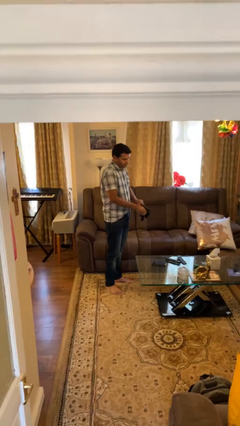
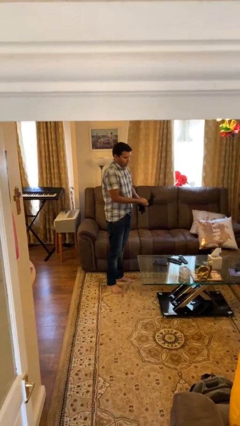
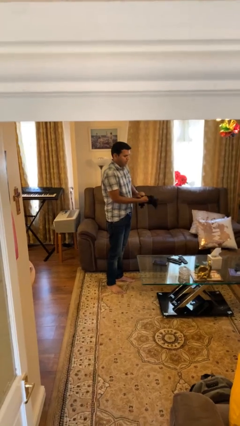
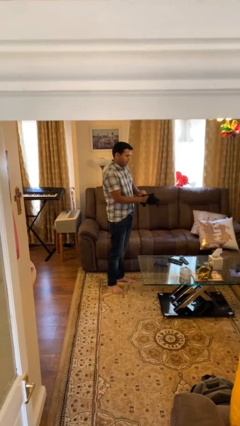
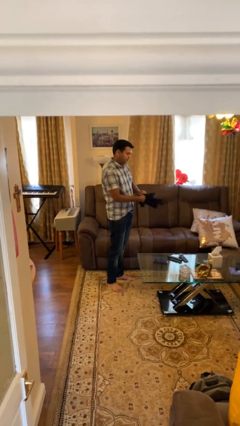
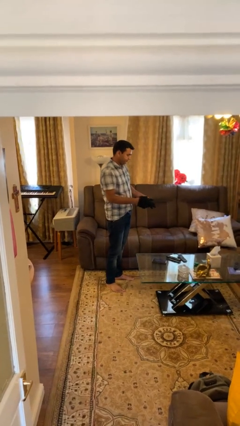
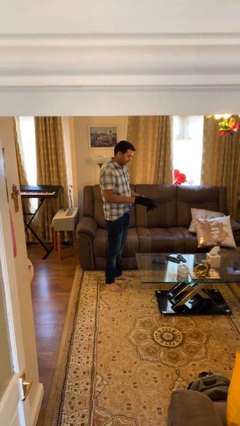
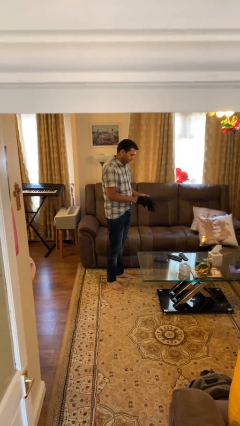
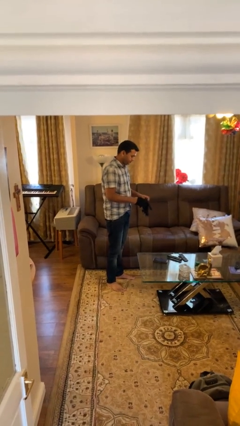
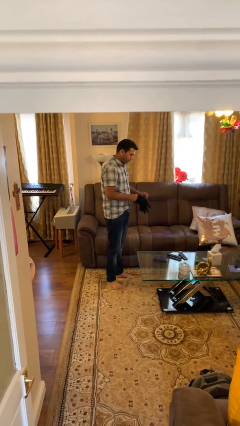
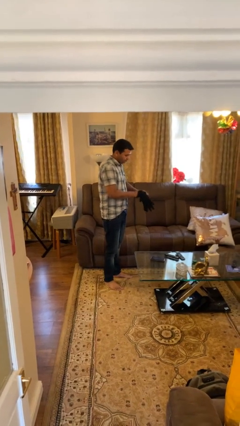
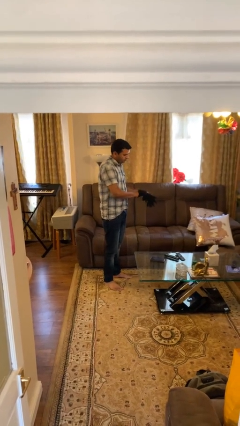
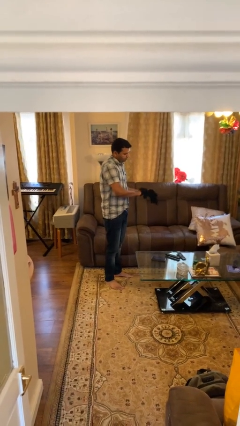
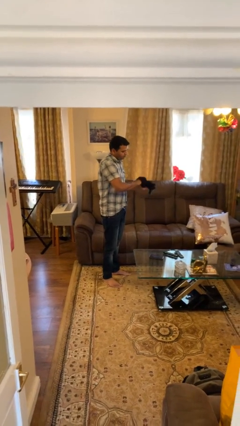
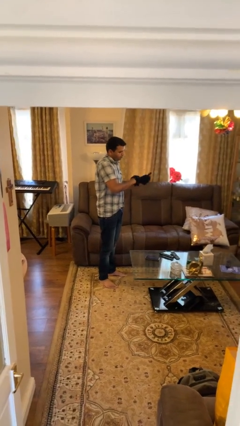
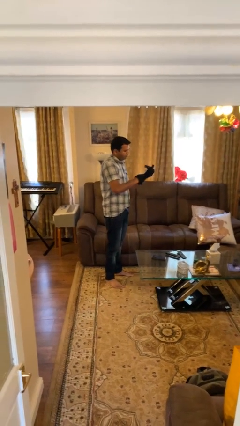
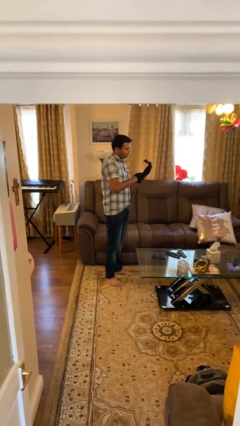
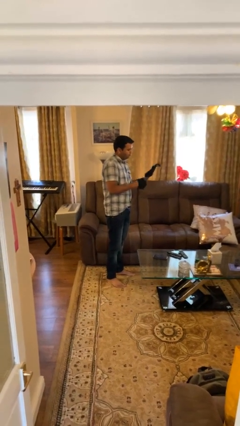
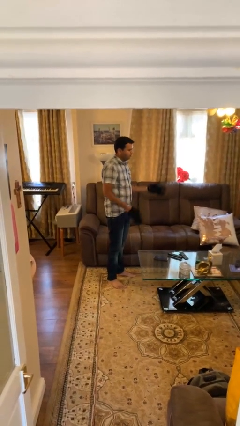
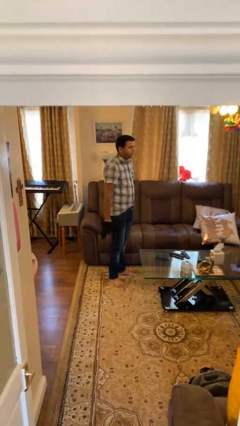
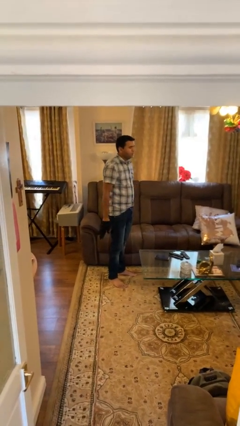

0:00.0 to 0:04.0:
person puts on gloves

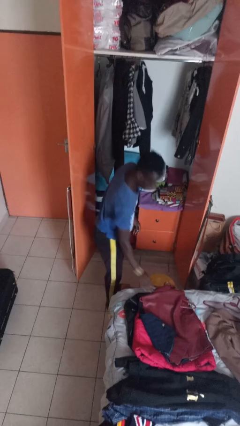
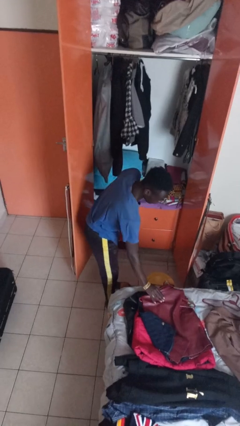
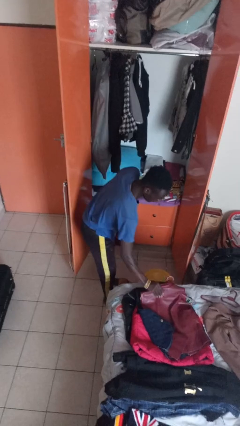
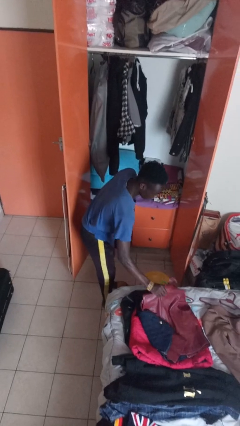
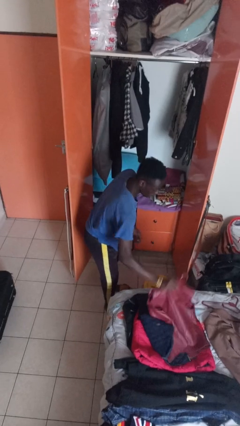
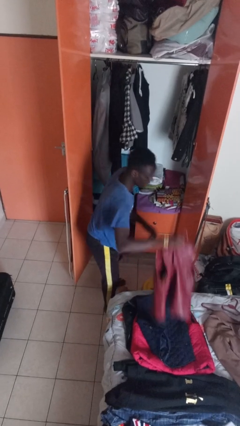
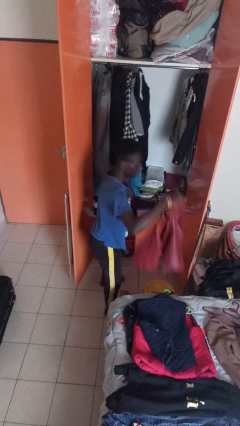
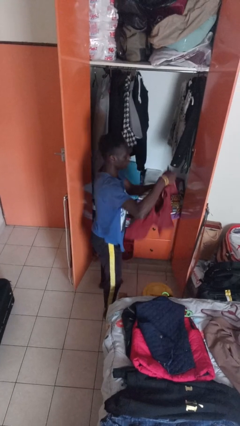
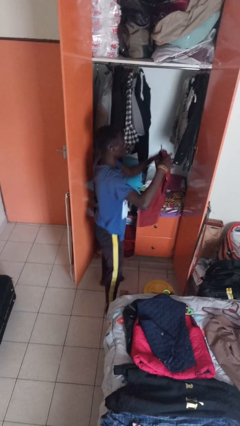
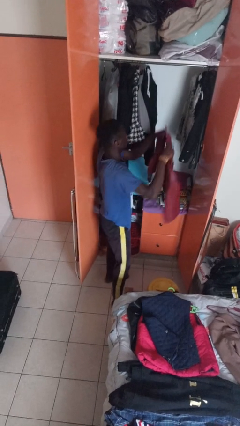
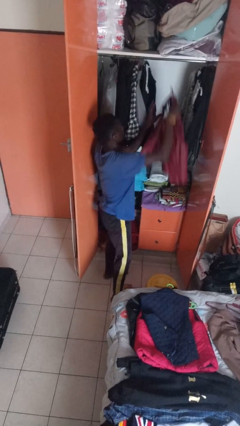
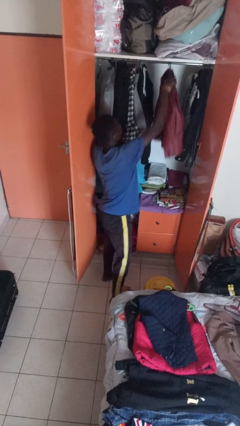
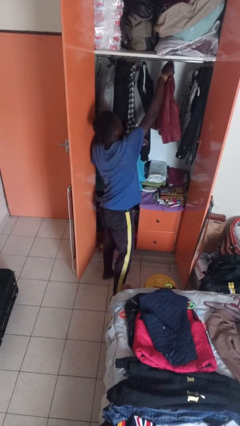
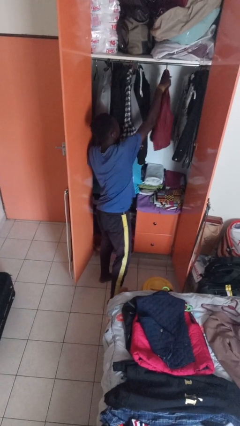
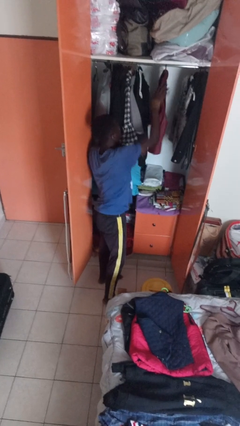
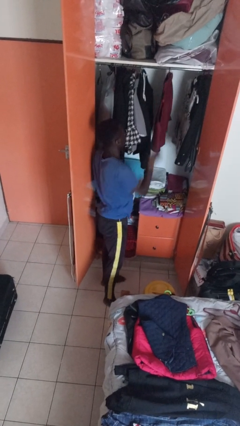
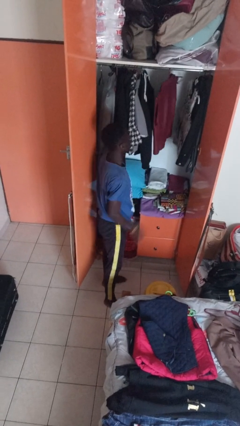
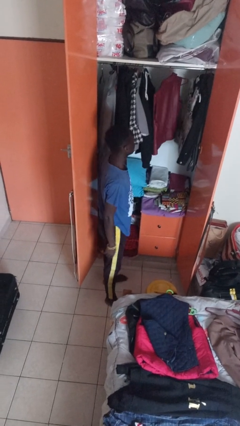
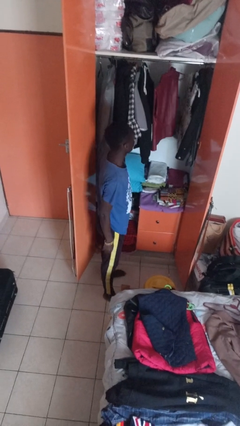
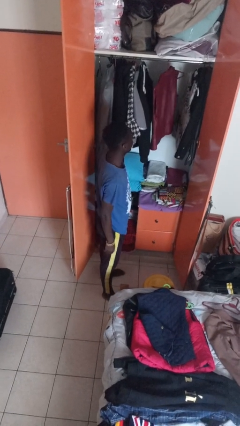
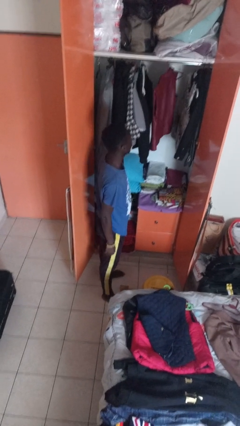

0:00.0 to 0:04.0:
person puts clothes into closet

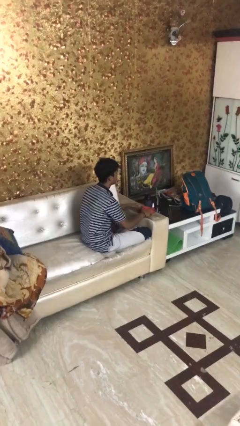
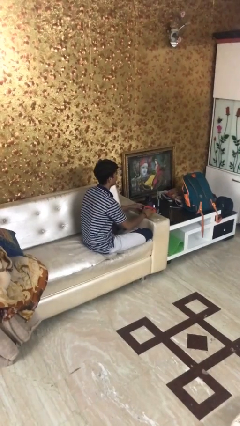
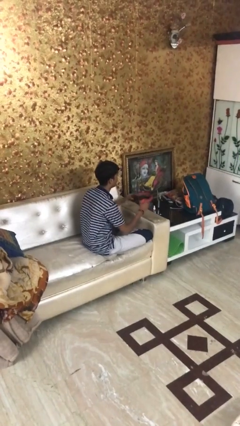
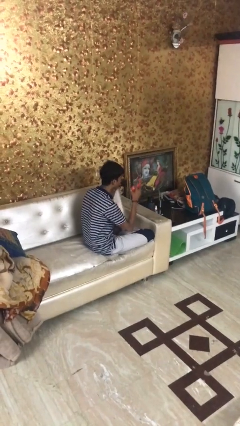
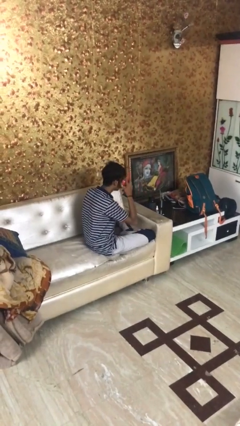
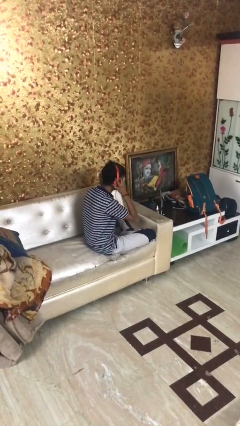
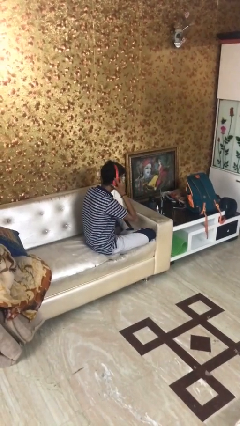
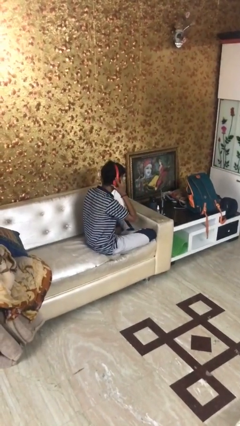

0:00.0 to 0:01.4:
person puts on headphones

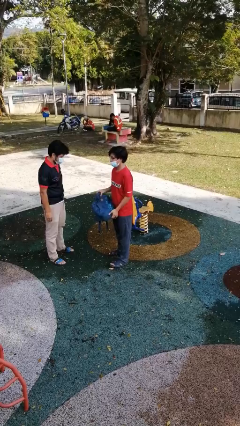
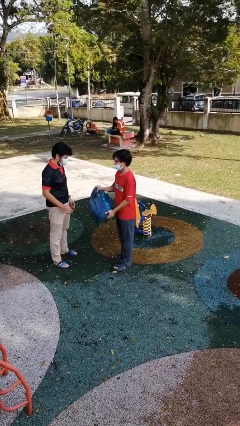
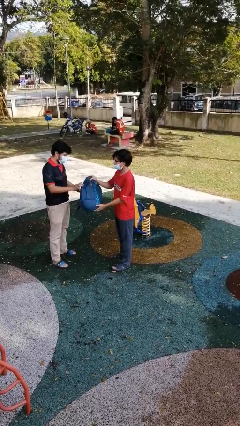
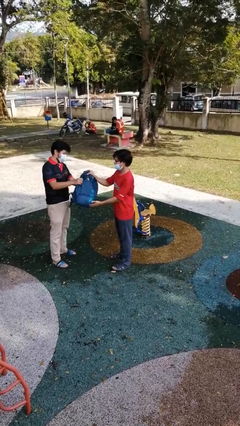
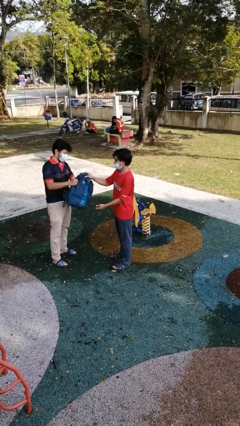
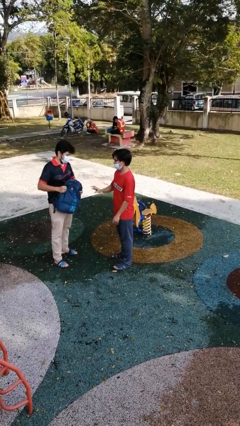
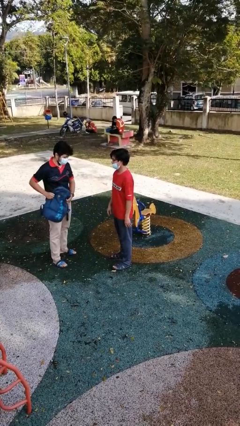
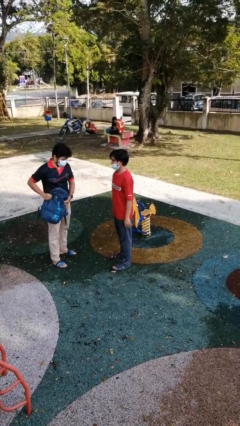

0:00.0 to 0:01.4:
person transfers object to person

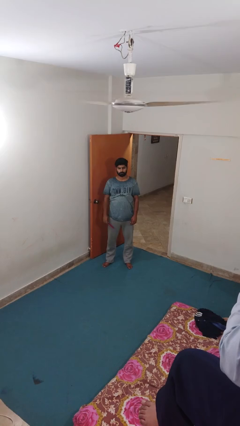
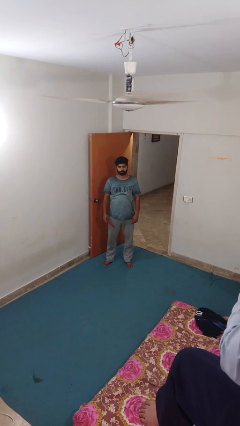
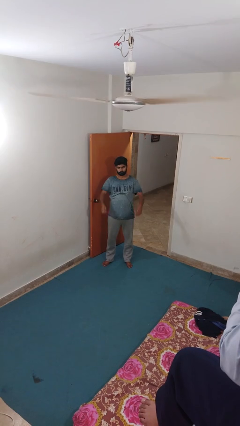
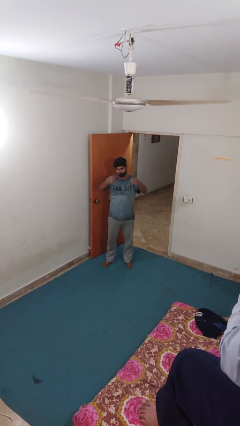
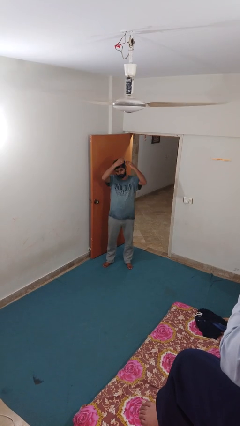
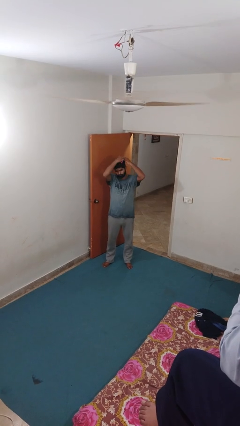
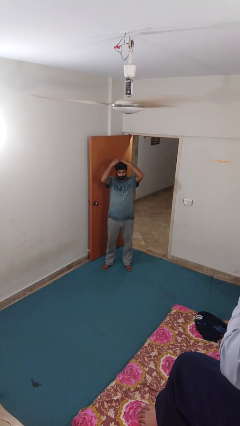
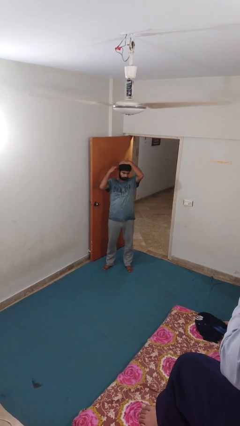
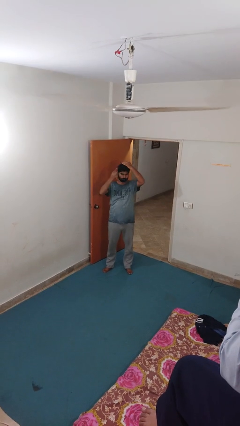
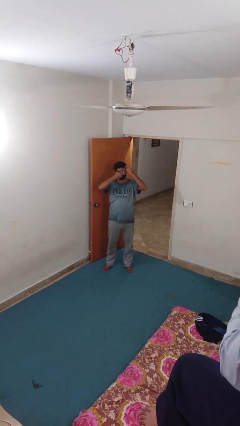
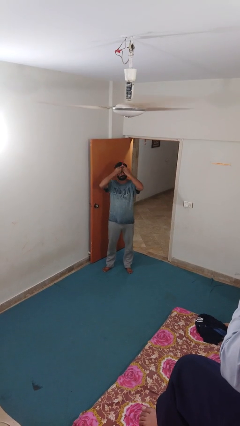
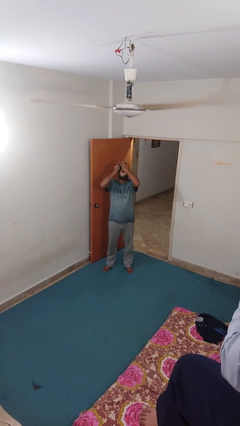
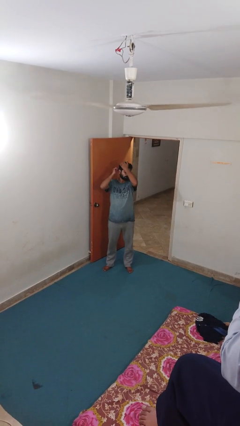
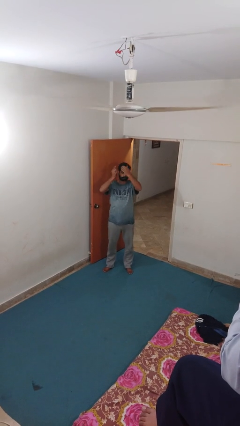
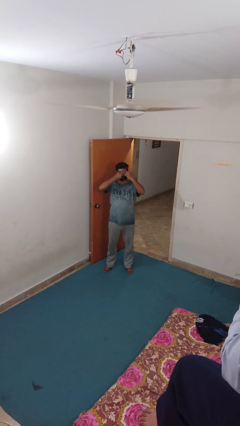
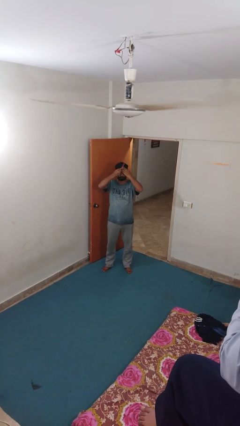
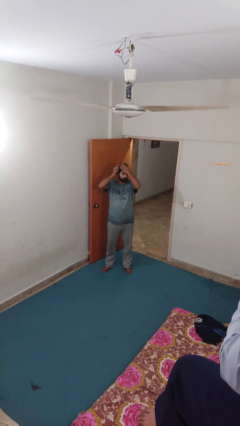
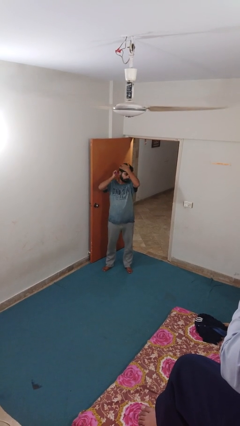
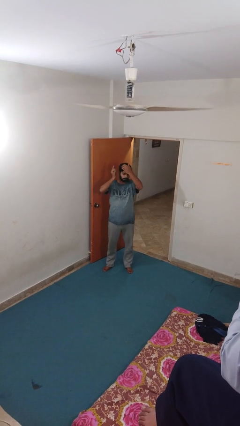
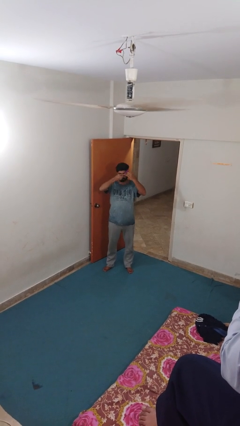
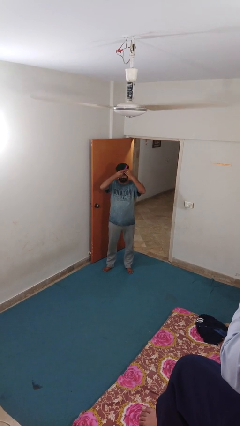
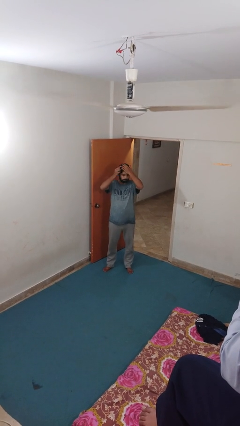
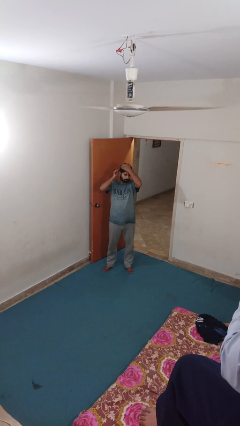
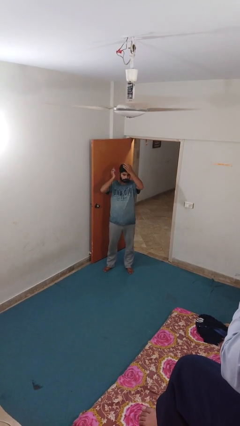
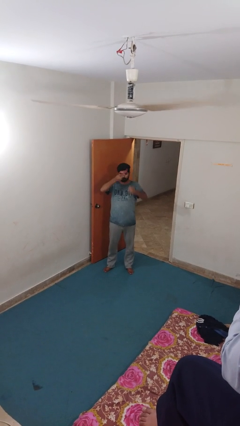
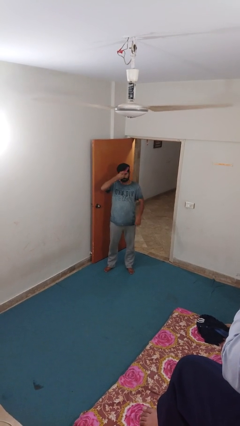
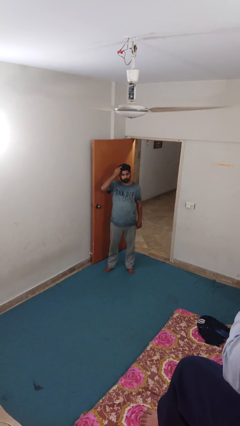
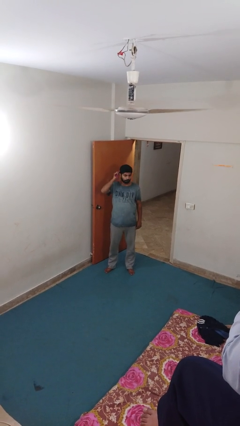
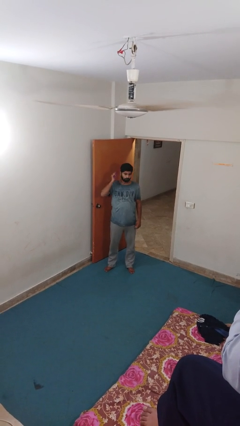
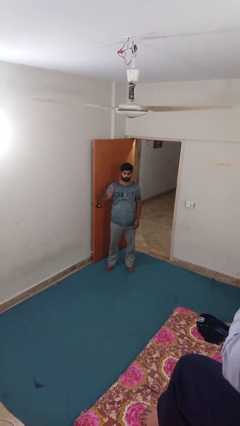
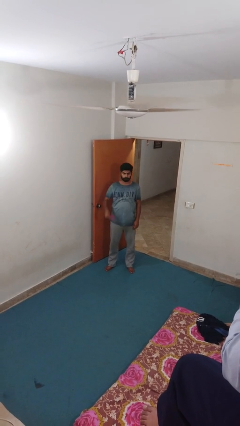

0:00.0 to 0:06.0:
person brushes hair

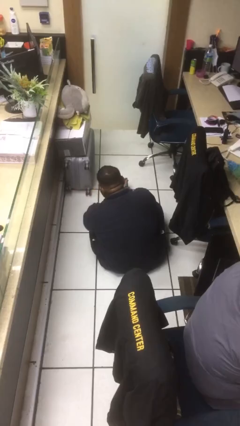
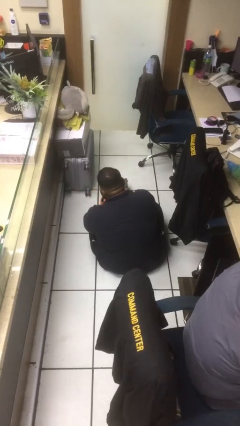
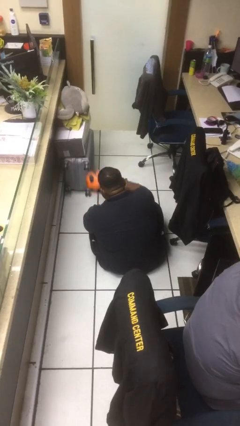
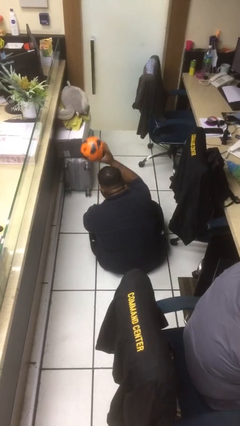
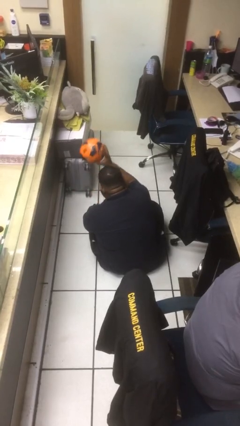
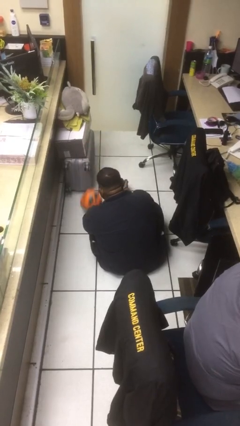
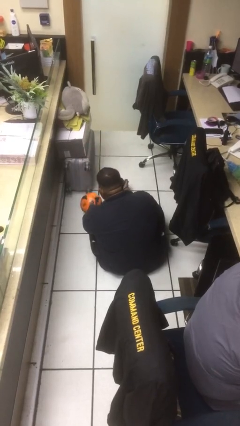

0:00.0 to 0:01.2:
person bounces ball on floor
